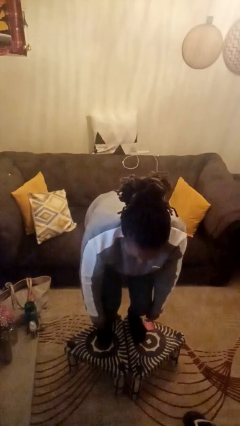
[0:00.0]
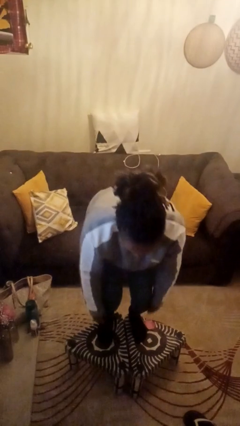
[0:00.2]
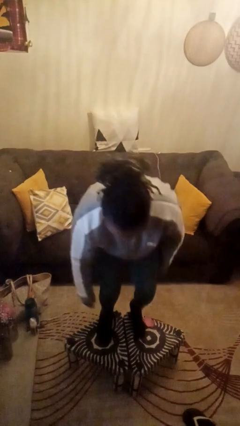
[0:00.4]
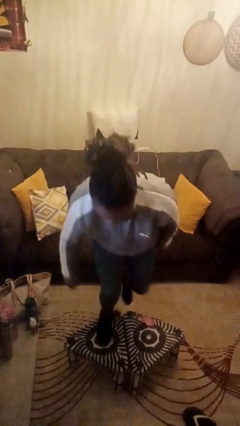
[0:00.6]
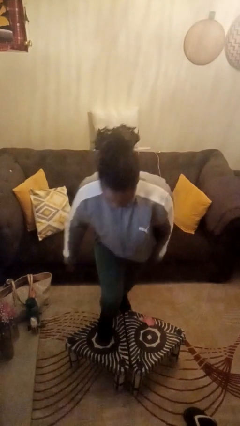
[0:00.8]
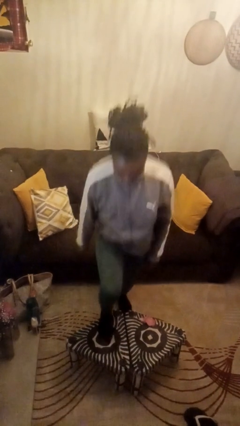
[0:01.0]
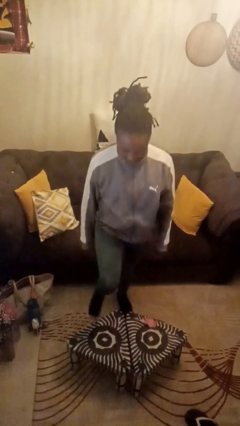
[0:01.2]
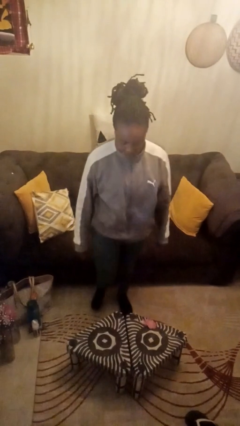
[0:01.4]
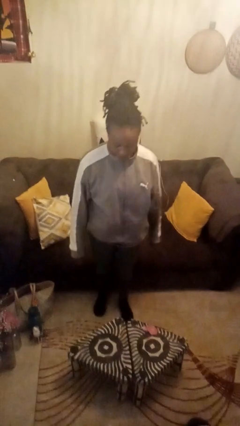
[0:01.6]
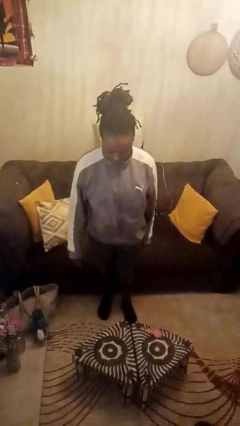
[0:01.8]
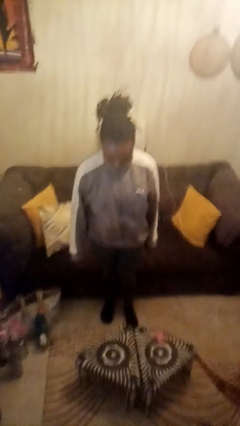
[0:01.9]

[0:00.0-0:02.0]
person climbs off table

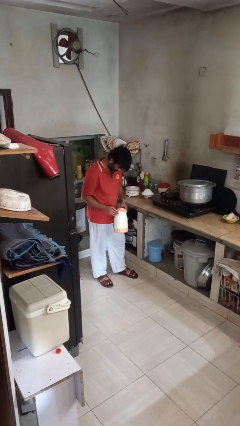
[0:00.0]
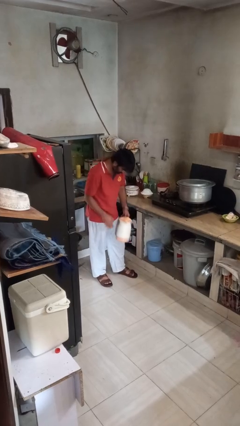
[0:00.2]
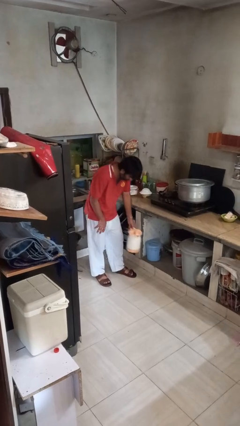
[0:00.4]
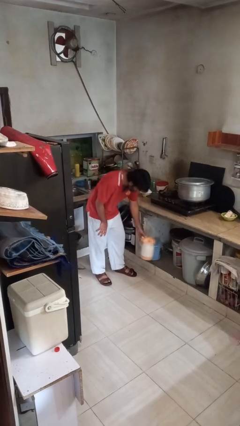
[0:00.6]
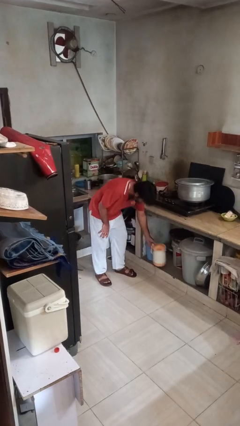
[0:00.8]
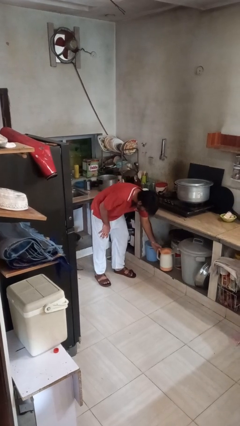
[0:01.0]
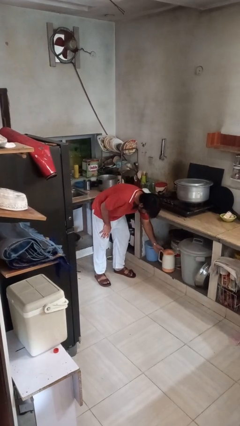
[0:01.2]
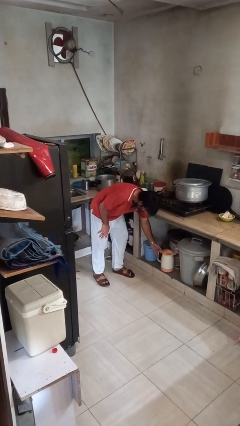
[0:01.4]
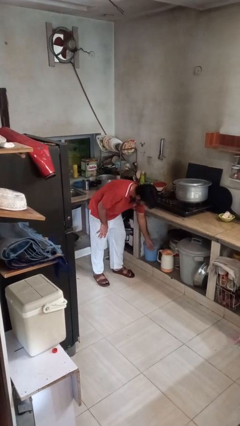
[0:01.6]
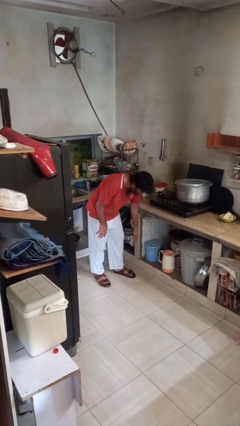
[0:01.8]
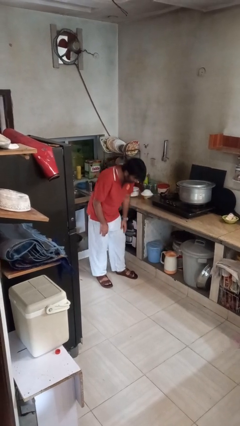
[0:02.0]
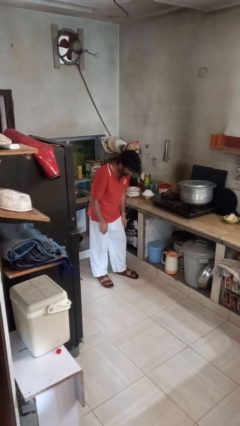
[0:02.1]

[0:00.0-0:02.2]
person puts down object into cabinet

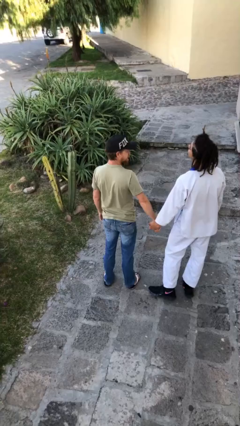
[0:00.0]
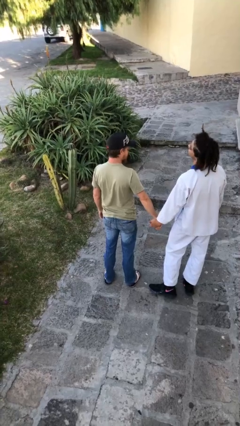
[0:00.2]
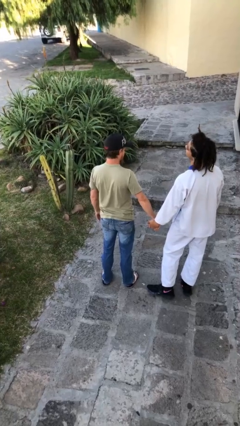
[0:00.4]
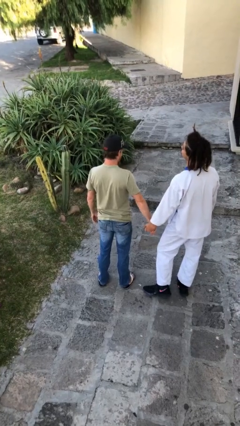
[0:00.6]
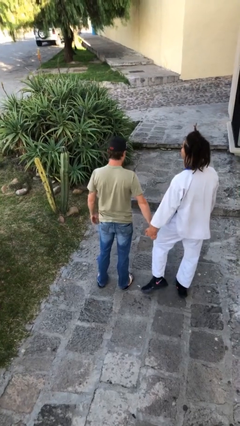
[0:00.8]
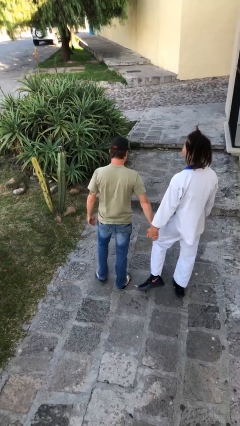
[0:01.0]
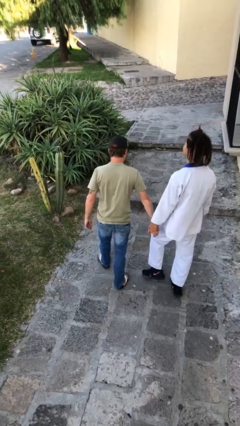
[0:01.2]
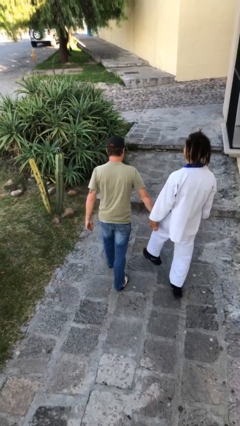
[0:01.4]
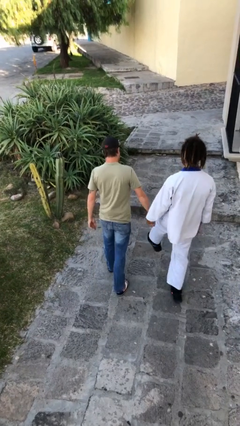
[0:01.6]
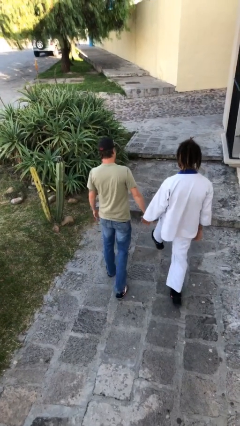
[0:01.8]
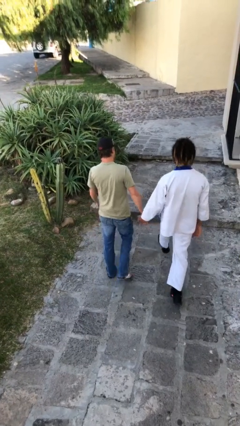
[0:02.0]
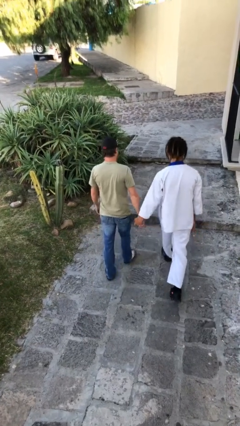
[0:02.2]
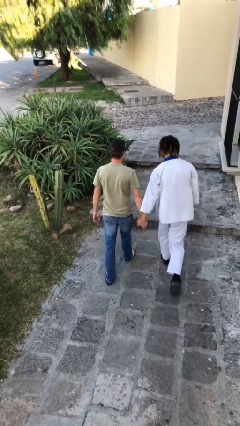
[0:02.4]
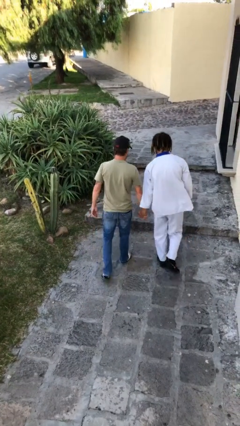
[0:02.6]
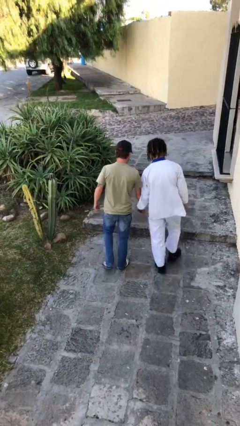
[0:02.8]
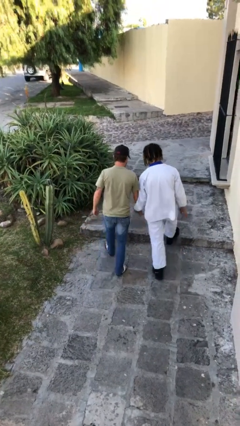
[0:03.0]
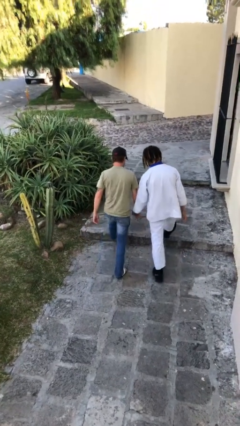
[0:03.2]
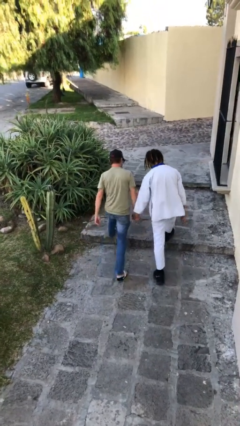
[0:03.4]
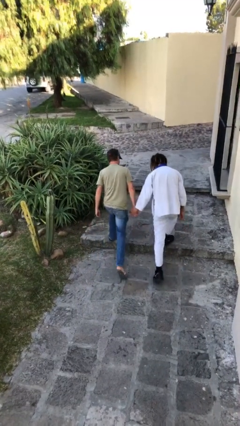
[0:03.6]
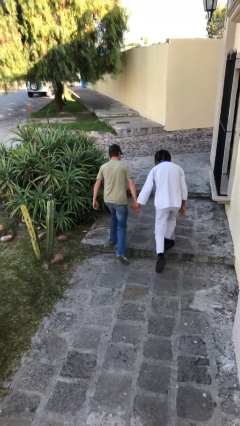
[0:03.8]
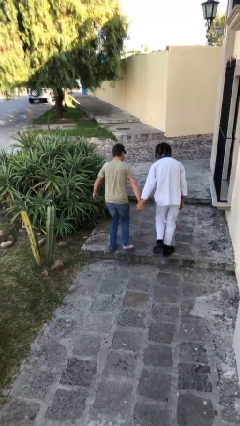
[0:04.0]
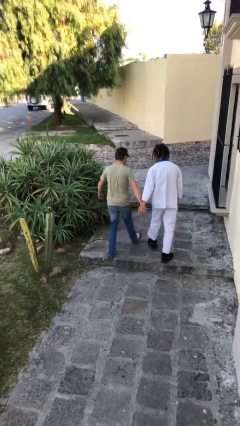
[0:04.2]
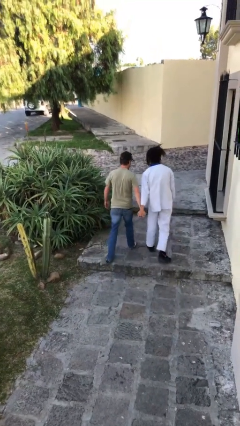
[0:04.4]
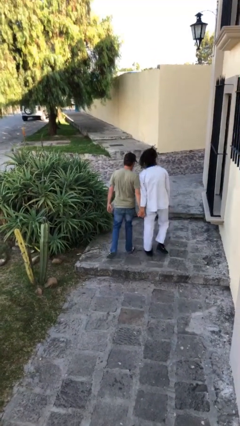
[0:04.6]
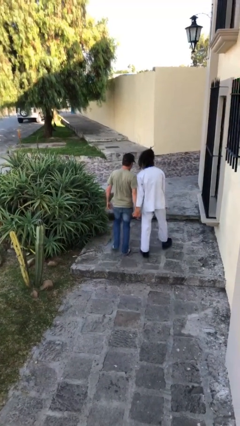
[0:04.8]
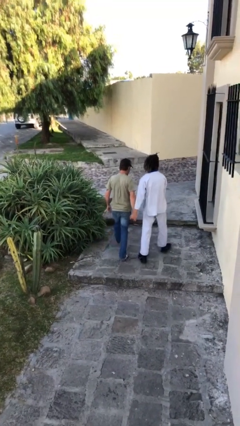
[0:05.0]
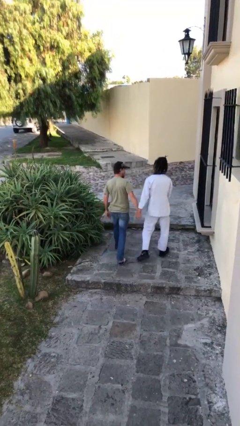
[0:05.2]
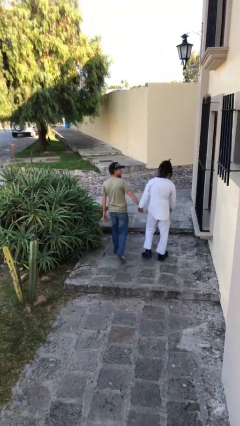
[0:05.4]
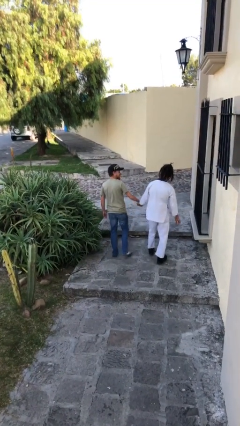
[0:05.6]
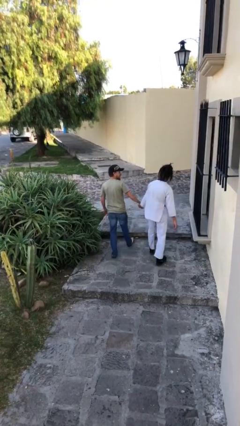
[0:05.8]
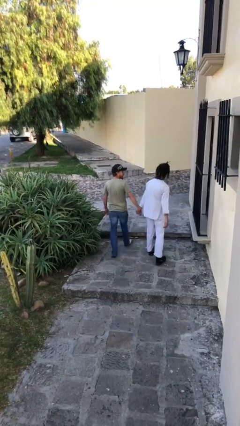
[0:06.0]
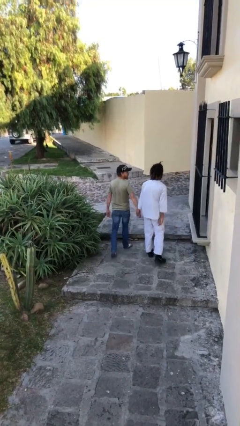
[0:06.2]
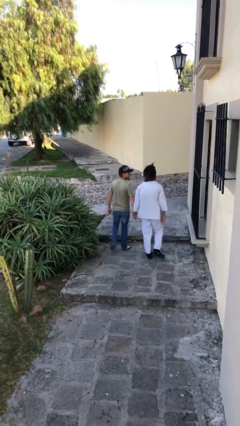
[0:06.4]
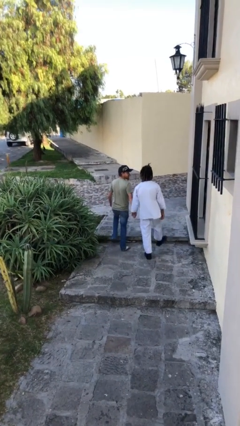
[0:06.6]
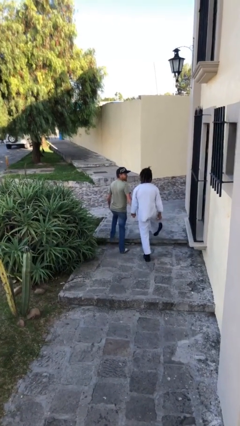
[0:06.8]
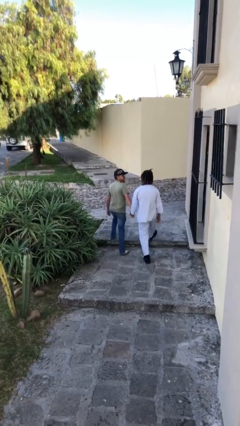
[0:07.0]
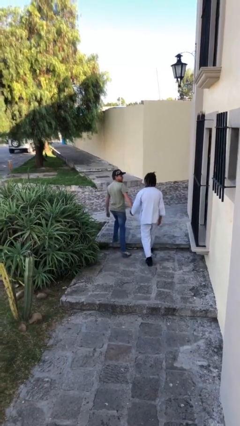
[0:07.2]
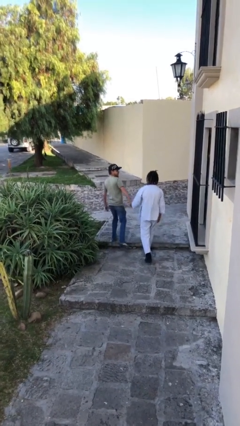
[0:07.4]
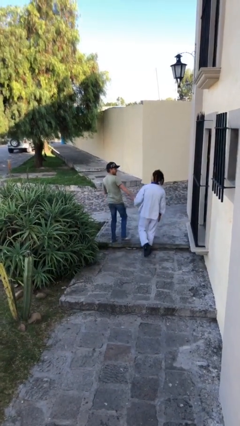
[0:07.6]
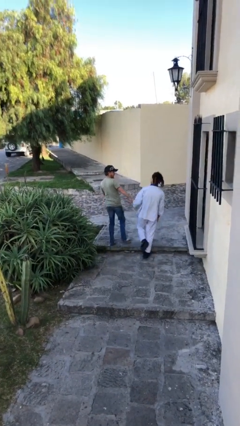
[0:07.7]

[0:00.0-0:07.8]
person holds hand

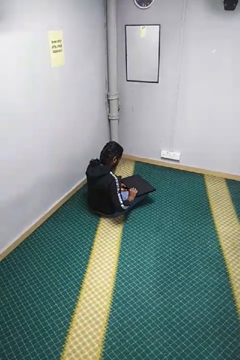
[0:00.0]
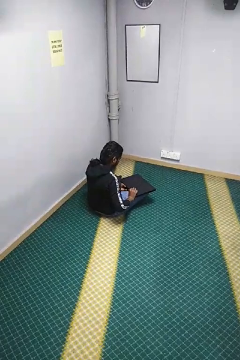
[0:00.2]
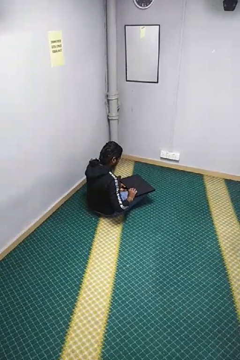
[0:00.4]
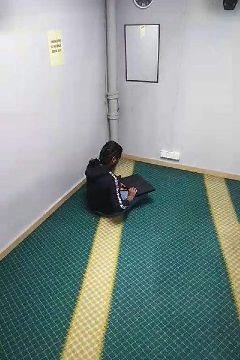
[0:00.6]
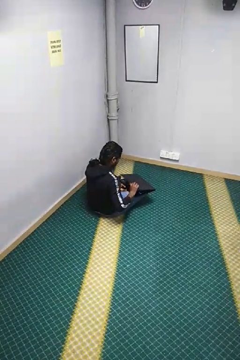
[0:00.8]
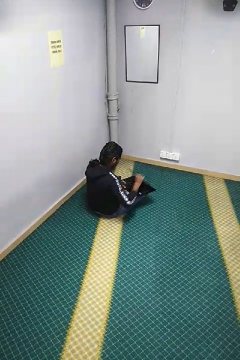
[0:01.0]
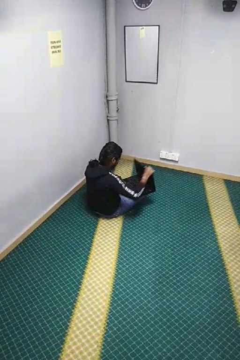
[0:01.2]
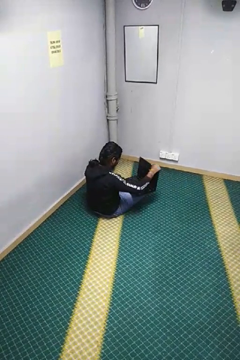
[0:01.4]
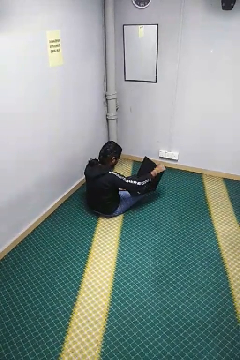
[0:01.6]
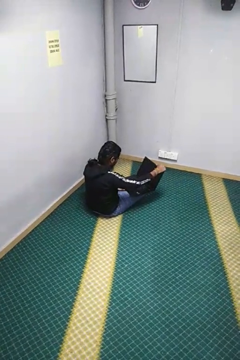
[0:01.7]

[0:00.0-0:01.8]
person opens laptop

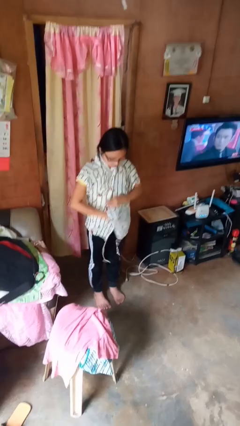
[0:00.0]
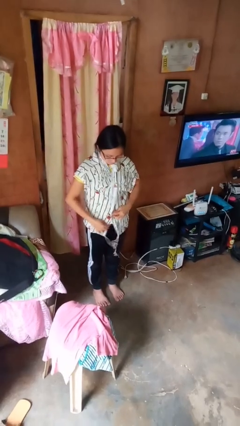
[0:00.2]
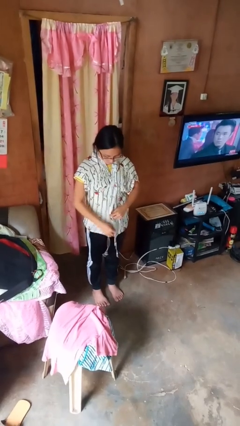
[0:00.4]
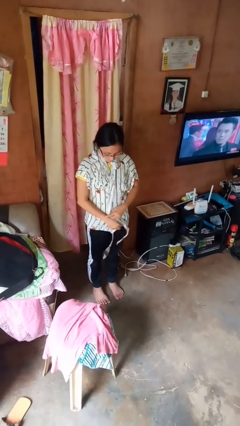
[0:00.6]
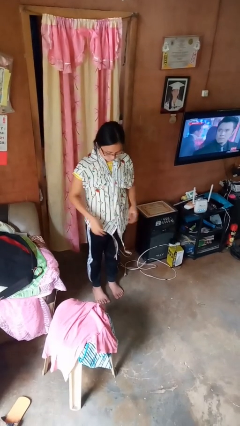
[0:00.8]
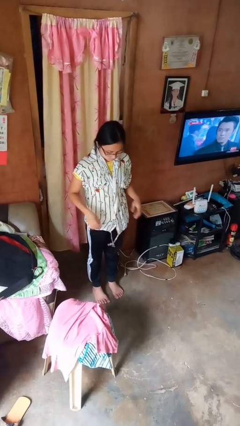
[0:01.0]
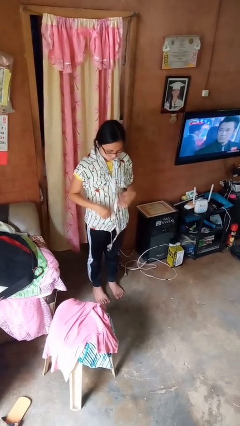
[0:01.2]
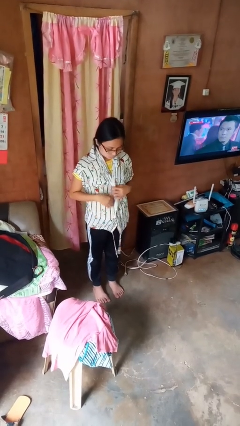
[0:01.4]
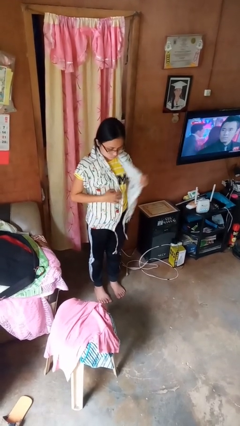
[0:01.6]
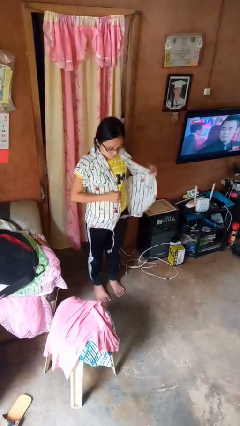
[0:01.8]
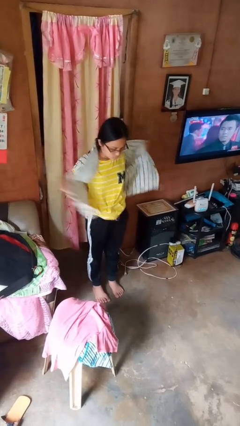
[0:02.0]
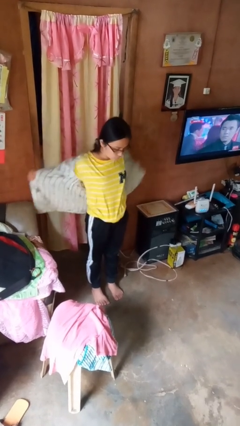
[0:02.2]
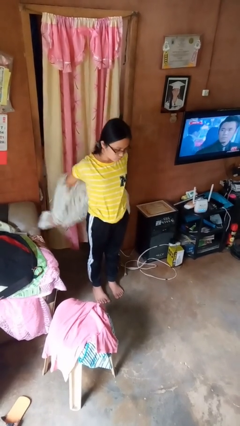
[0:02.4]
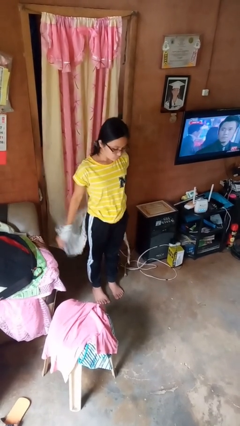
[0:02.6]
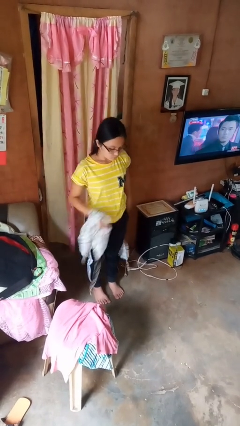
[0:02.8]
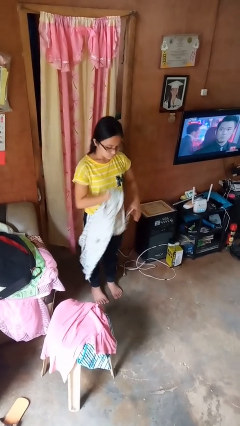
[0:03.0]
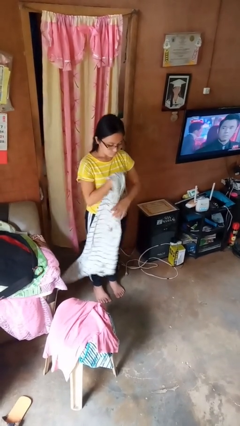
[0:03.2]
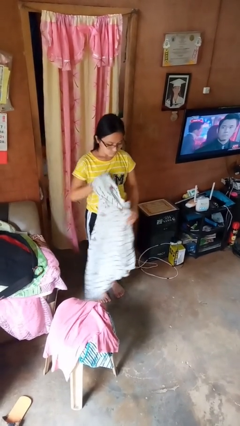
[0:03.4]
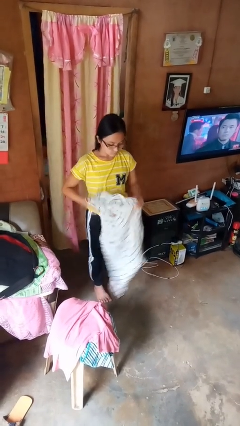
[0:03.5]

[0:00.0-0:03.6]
person takes off shirt

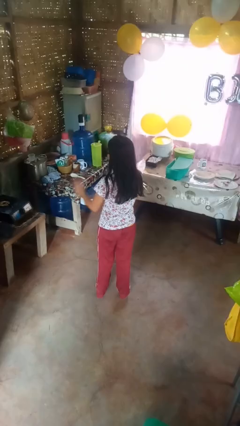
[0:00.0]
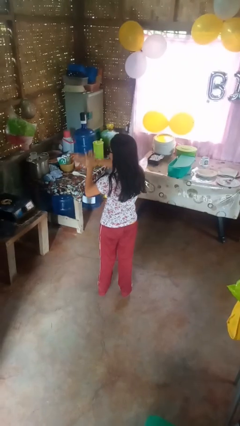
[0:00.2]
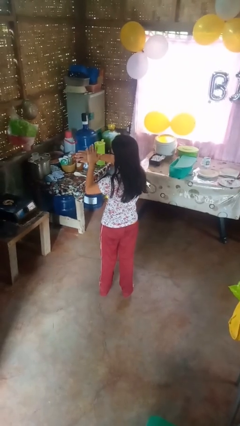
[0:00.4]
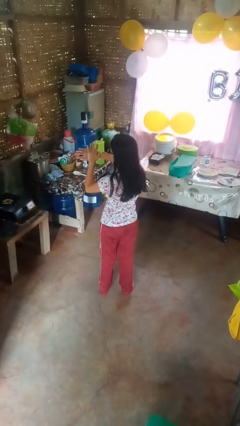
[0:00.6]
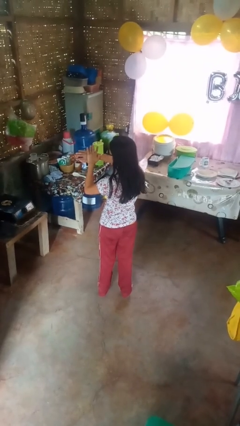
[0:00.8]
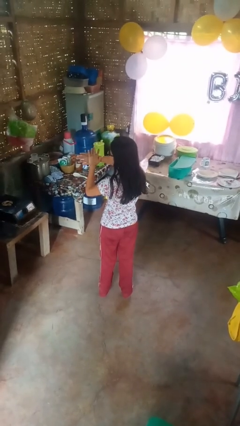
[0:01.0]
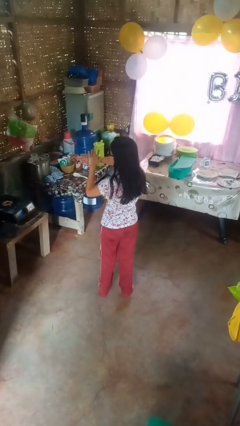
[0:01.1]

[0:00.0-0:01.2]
person swats bug
